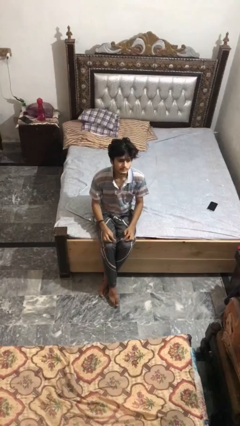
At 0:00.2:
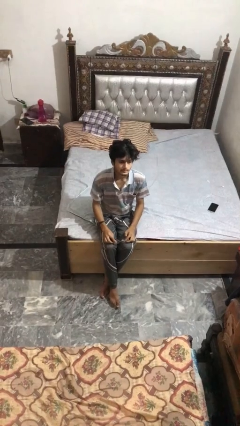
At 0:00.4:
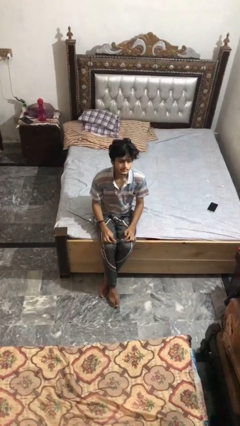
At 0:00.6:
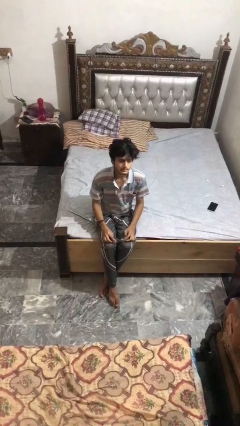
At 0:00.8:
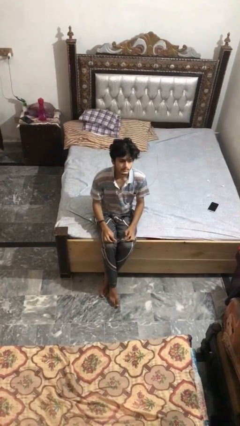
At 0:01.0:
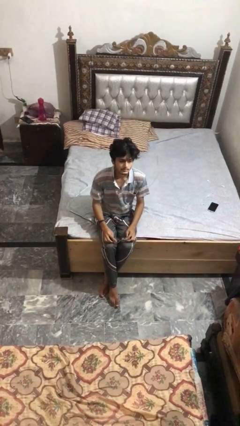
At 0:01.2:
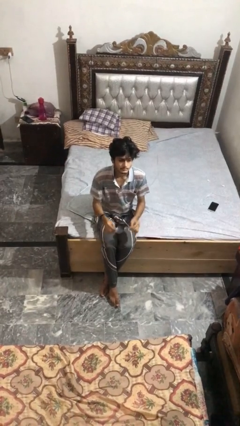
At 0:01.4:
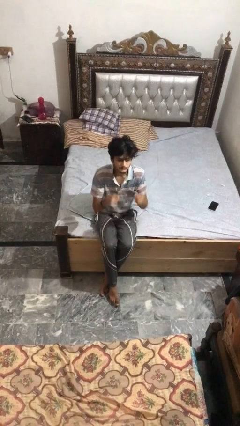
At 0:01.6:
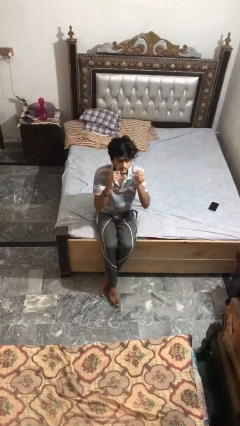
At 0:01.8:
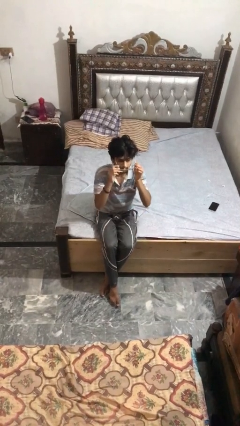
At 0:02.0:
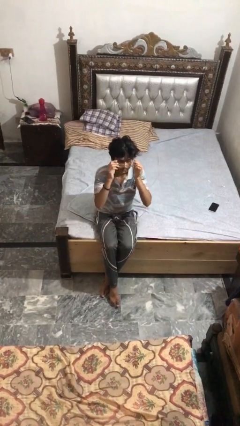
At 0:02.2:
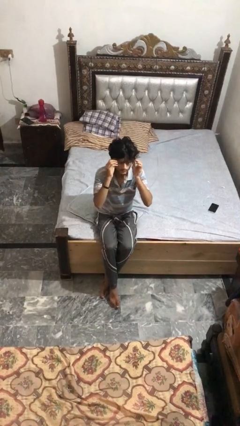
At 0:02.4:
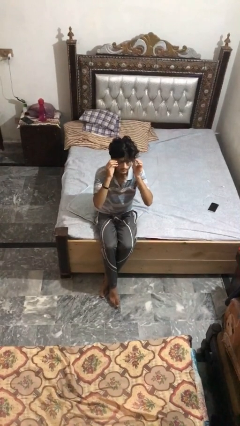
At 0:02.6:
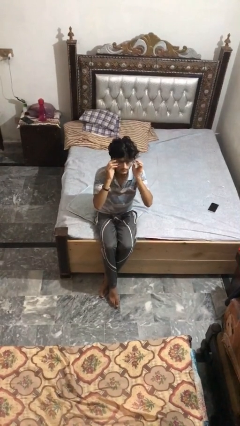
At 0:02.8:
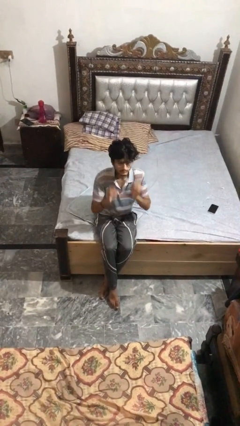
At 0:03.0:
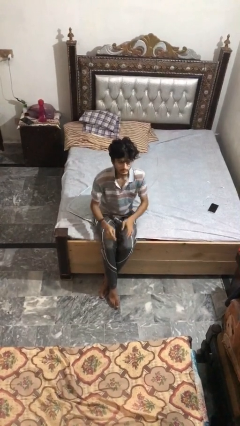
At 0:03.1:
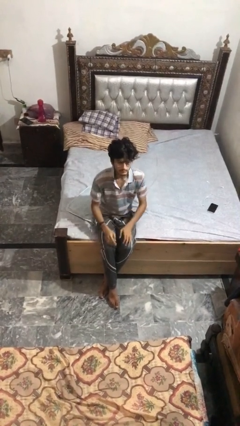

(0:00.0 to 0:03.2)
person puts on glasses

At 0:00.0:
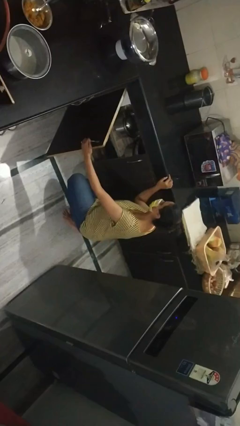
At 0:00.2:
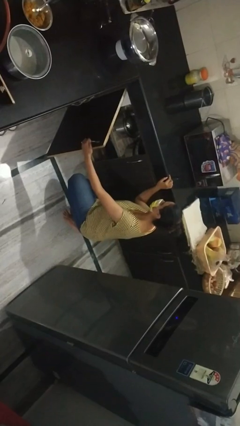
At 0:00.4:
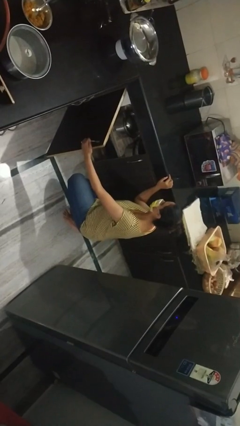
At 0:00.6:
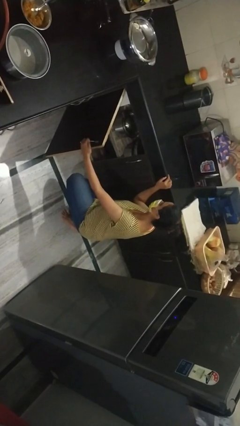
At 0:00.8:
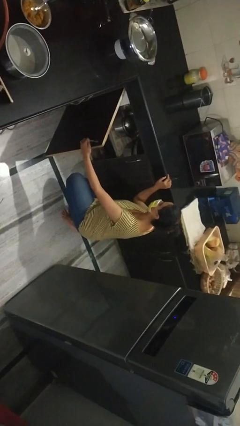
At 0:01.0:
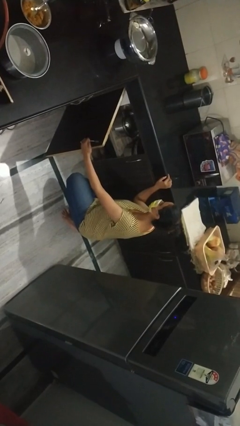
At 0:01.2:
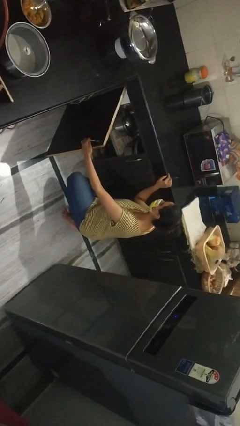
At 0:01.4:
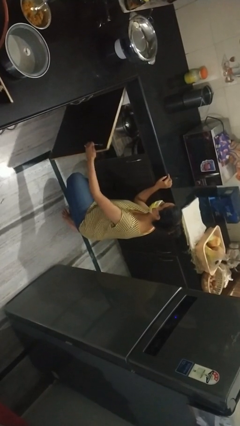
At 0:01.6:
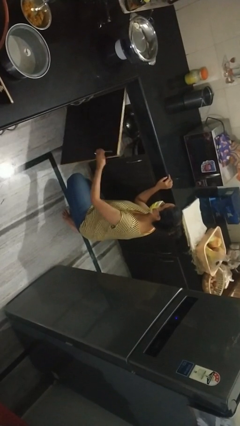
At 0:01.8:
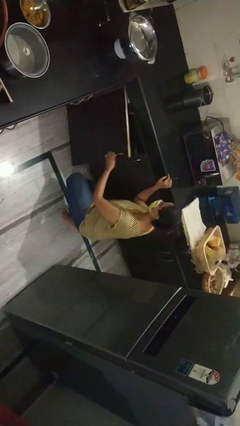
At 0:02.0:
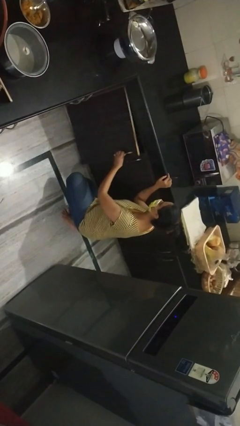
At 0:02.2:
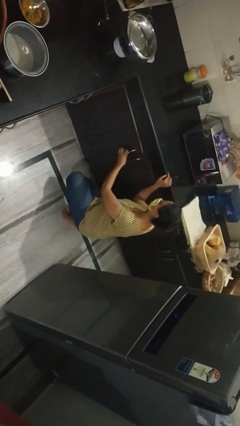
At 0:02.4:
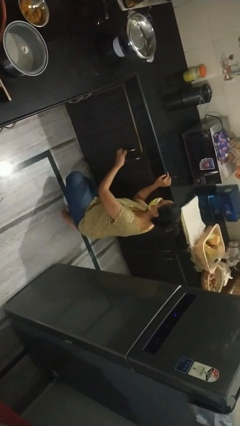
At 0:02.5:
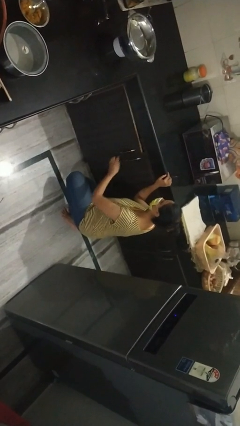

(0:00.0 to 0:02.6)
person closes cabinet

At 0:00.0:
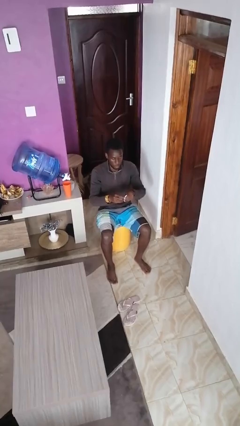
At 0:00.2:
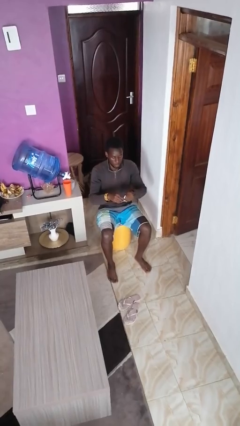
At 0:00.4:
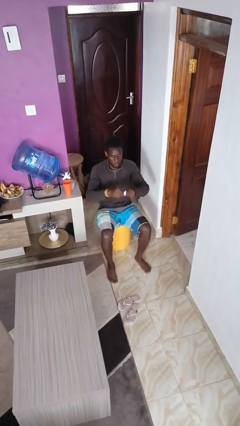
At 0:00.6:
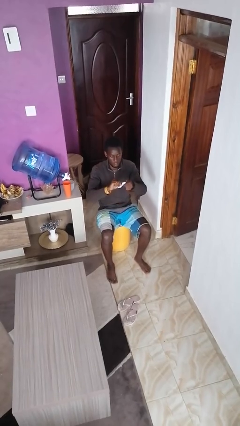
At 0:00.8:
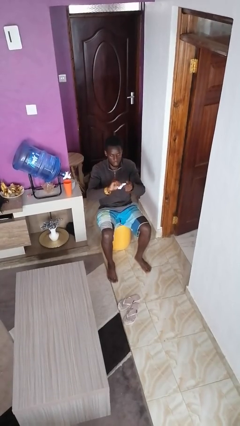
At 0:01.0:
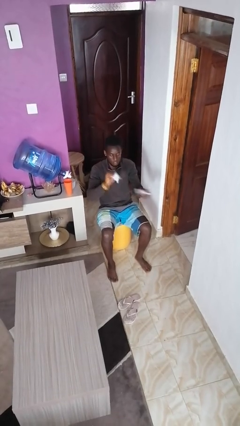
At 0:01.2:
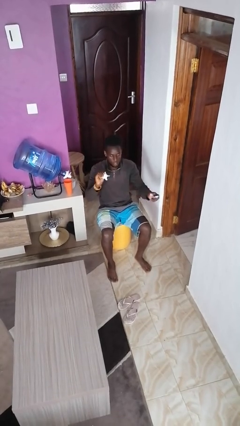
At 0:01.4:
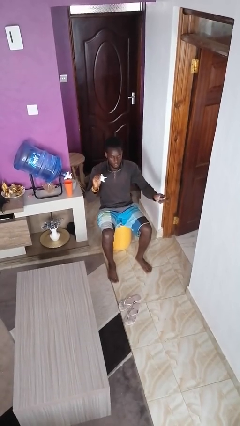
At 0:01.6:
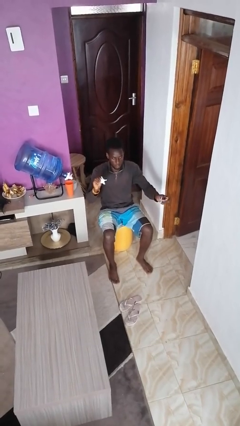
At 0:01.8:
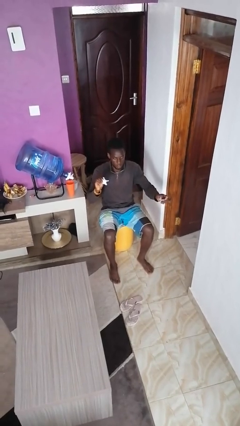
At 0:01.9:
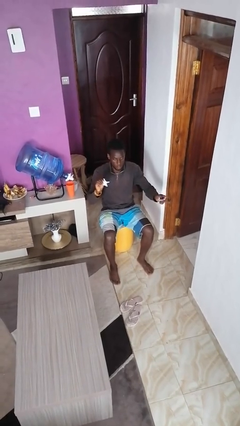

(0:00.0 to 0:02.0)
person tears paper

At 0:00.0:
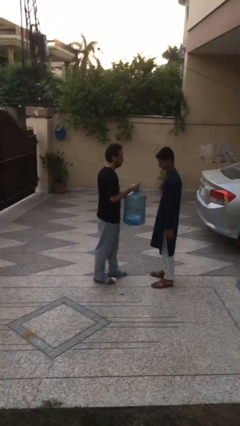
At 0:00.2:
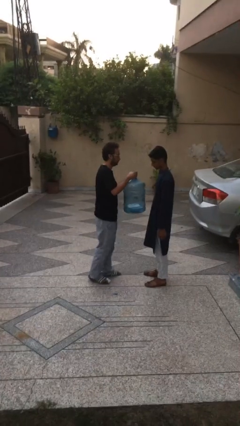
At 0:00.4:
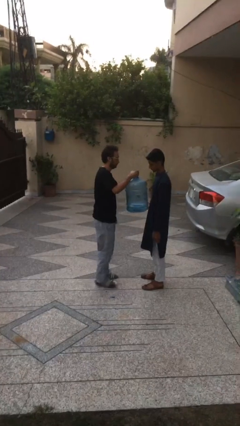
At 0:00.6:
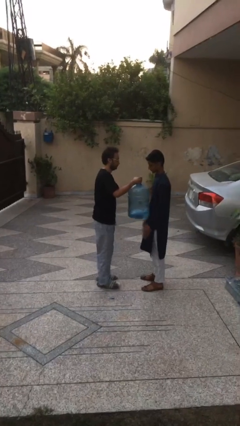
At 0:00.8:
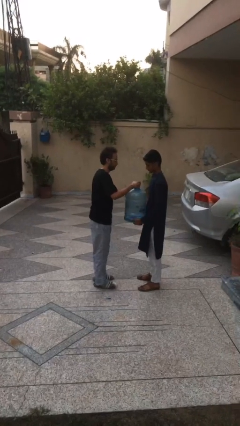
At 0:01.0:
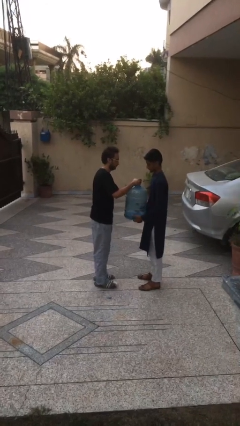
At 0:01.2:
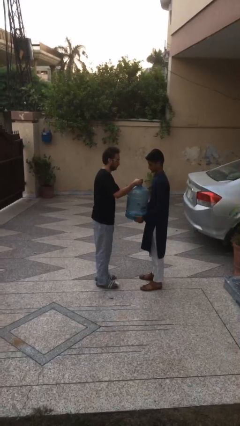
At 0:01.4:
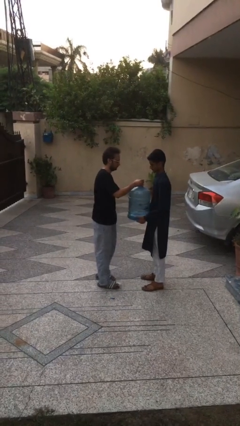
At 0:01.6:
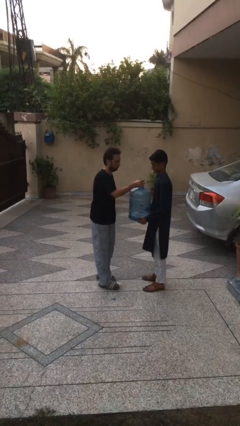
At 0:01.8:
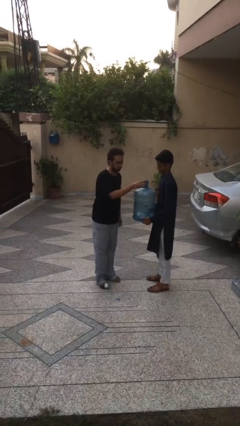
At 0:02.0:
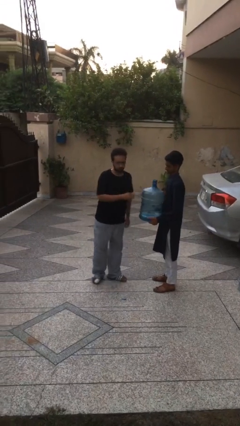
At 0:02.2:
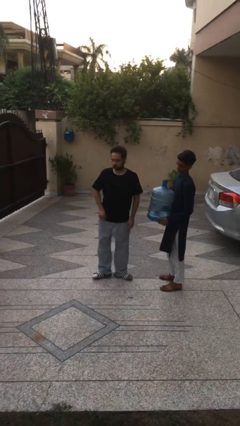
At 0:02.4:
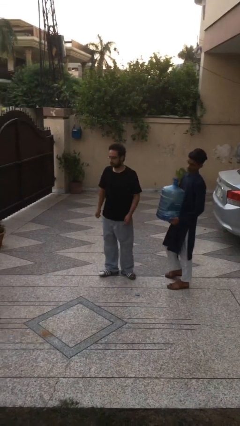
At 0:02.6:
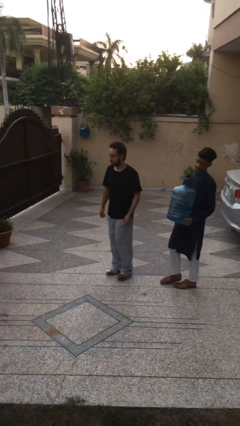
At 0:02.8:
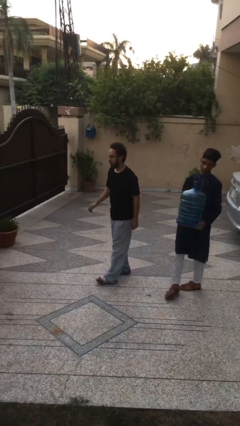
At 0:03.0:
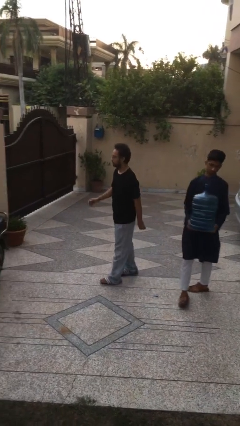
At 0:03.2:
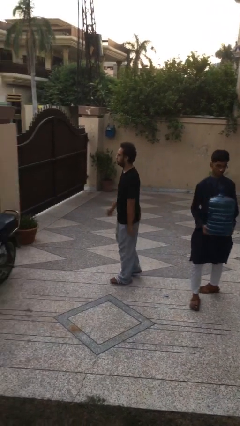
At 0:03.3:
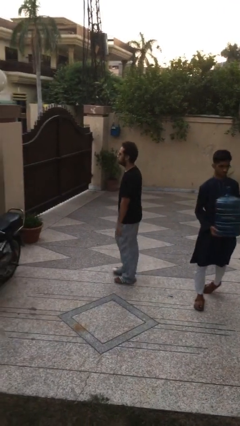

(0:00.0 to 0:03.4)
person transfers object to person

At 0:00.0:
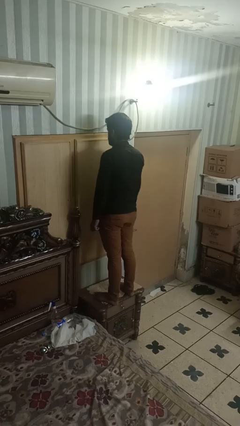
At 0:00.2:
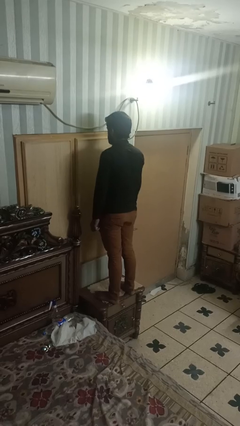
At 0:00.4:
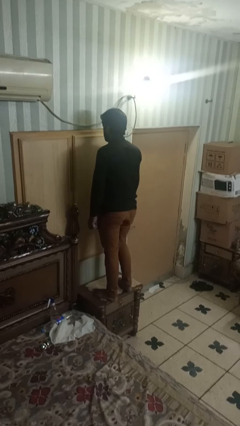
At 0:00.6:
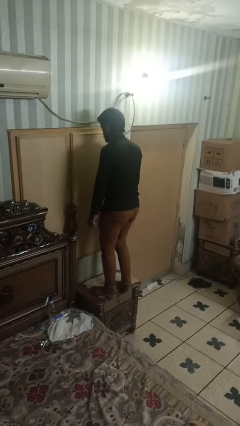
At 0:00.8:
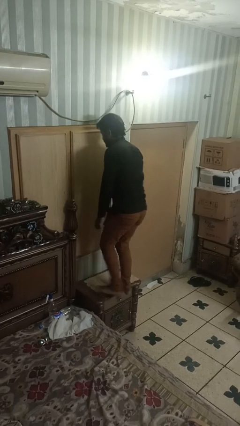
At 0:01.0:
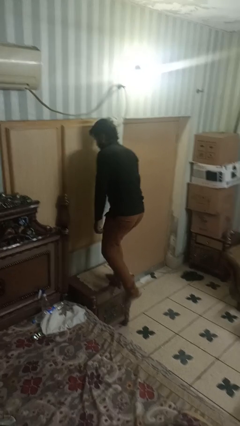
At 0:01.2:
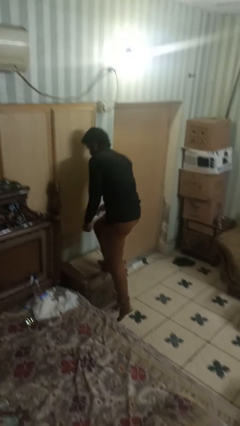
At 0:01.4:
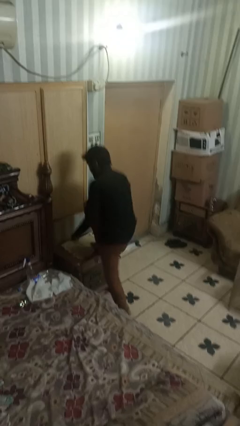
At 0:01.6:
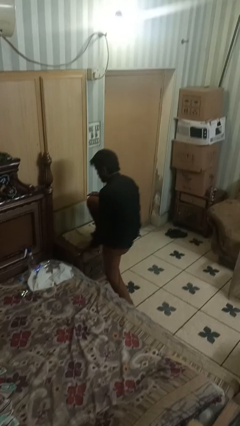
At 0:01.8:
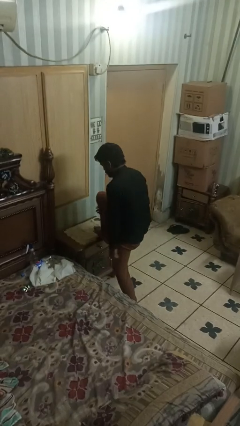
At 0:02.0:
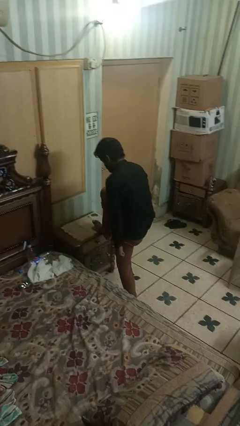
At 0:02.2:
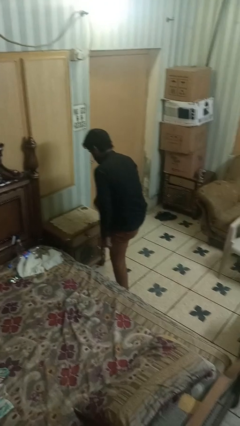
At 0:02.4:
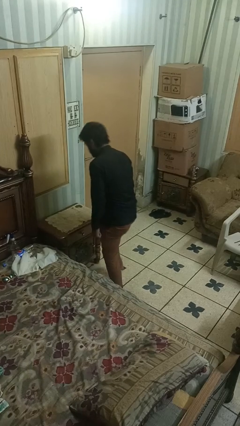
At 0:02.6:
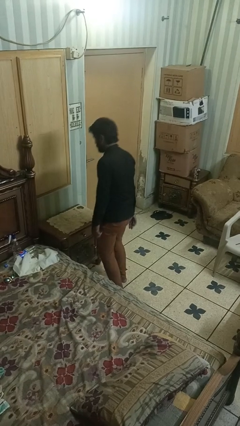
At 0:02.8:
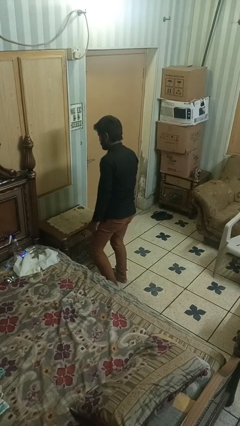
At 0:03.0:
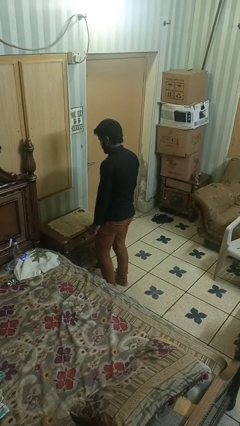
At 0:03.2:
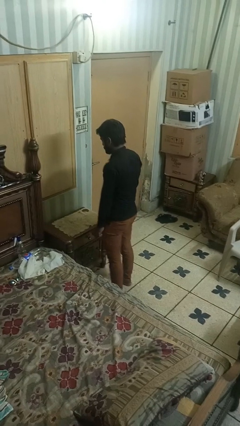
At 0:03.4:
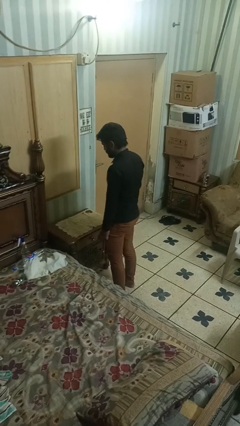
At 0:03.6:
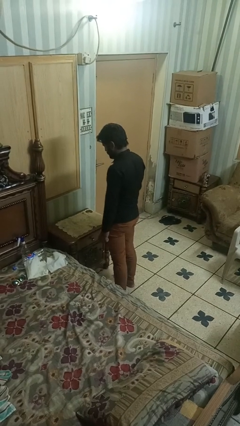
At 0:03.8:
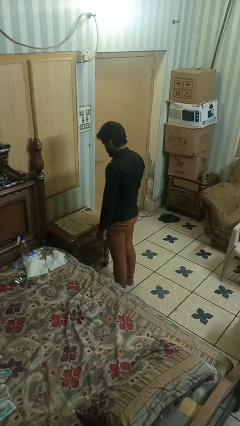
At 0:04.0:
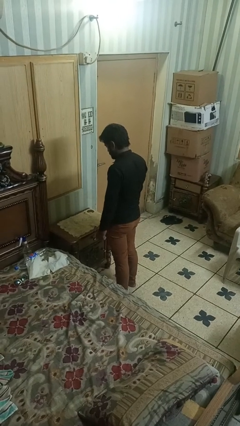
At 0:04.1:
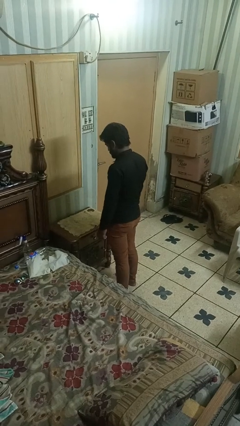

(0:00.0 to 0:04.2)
person climbs off table

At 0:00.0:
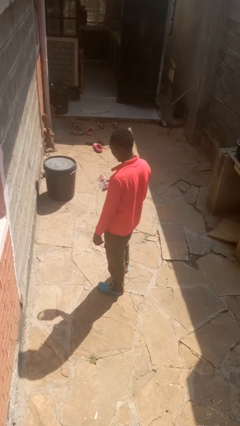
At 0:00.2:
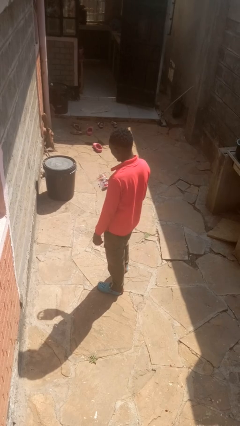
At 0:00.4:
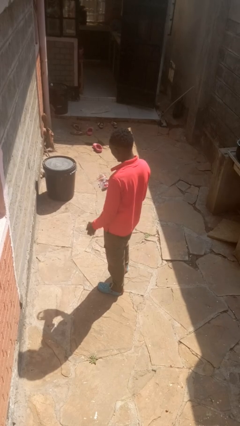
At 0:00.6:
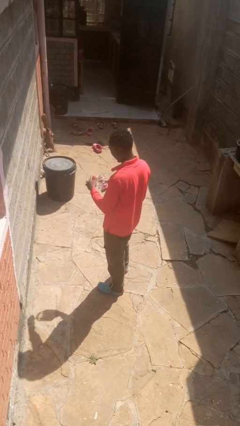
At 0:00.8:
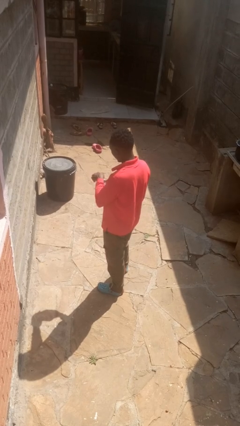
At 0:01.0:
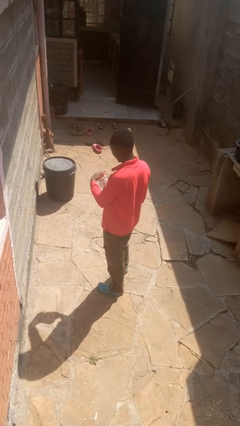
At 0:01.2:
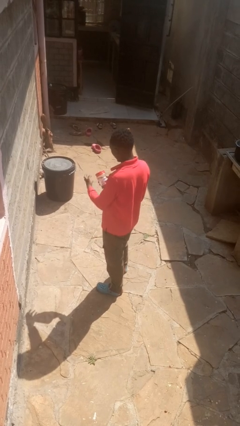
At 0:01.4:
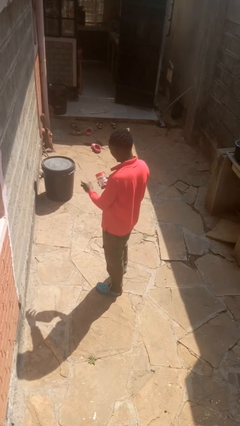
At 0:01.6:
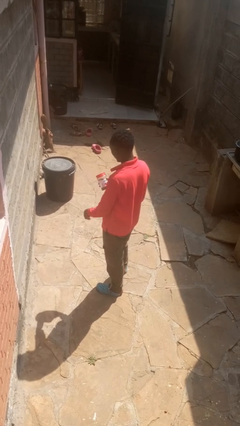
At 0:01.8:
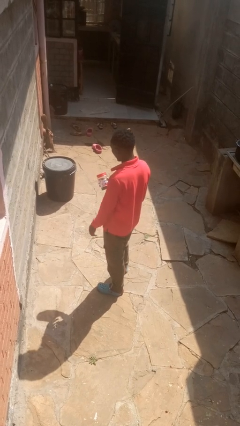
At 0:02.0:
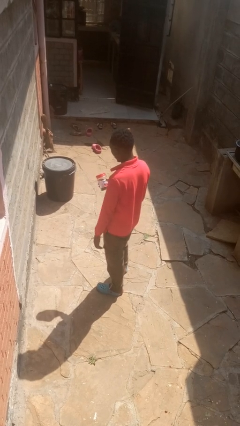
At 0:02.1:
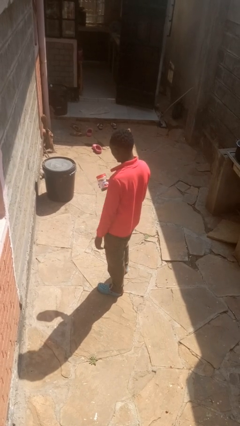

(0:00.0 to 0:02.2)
person closes jar
